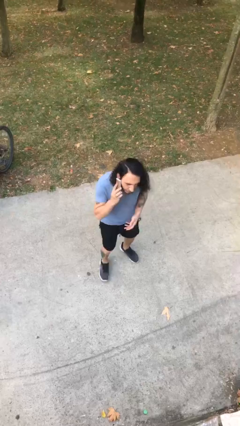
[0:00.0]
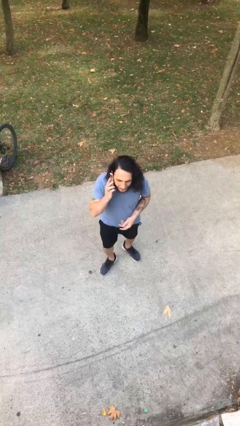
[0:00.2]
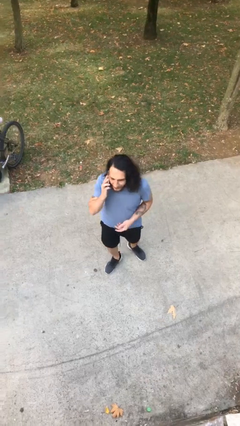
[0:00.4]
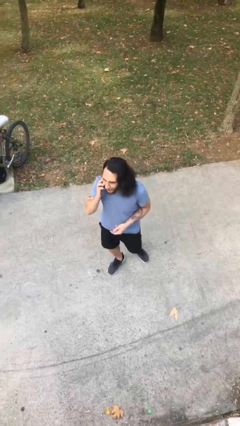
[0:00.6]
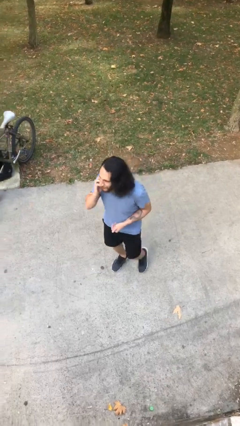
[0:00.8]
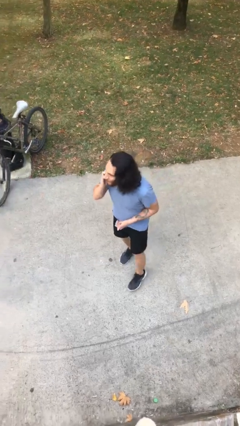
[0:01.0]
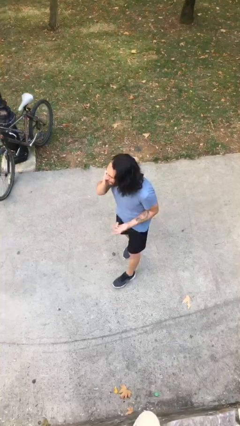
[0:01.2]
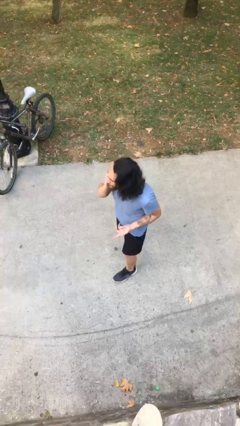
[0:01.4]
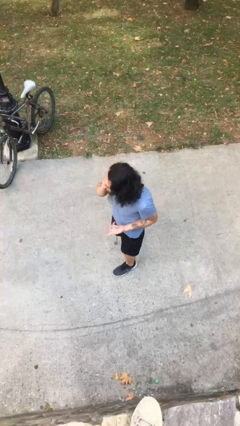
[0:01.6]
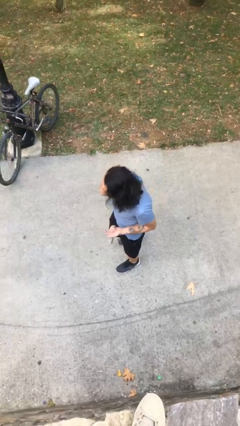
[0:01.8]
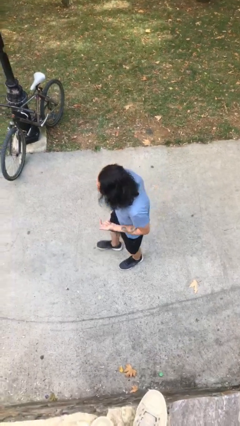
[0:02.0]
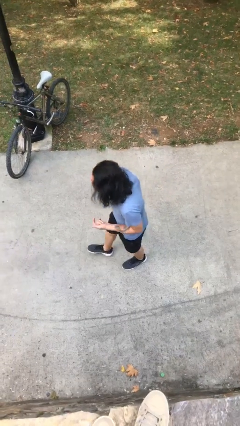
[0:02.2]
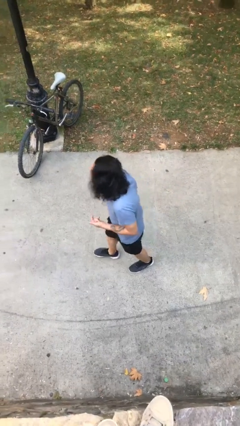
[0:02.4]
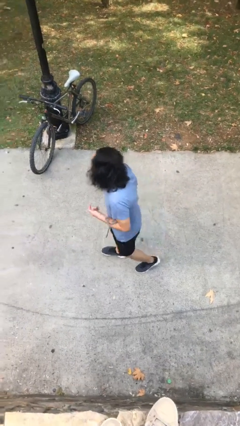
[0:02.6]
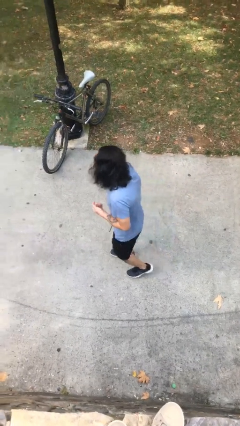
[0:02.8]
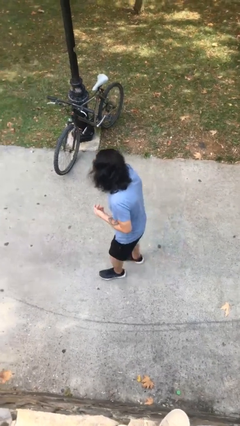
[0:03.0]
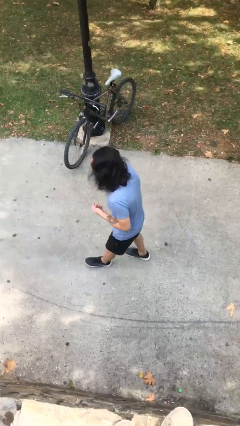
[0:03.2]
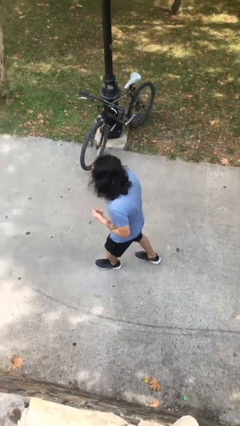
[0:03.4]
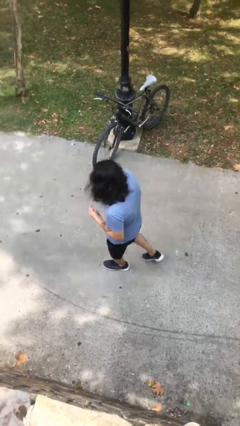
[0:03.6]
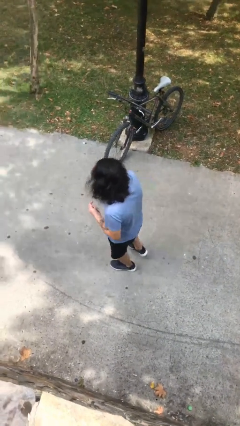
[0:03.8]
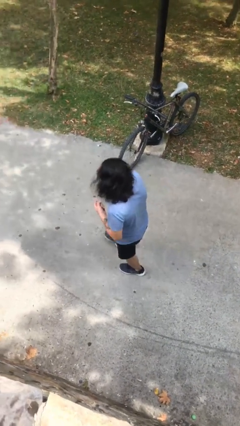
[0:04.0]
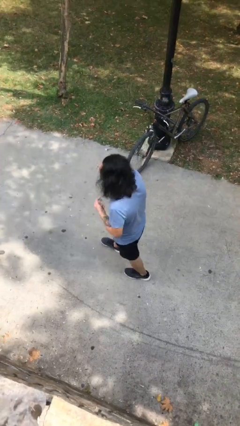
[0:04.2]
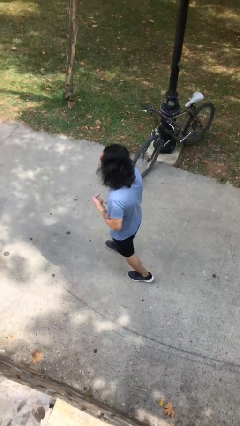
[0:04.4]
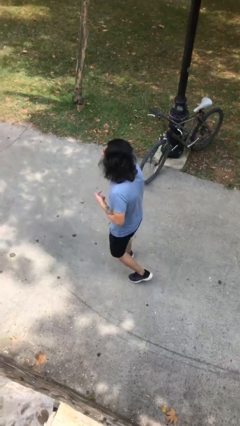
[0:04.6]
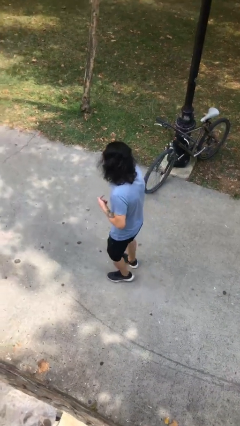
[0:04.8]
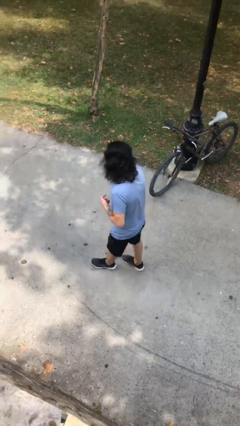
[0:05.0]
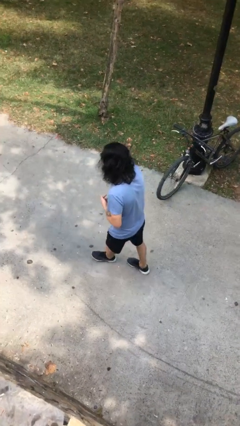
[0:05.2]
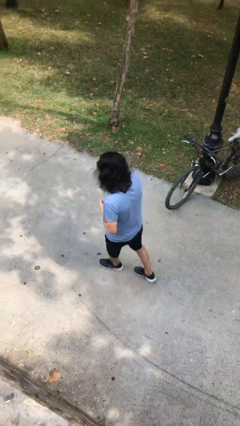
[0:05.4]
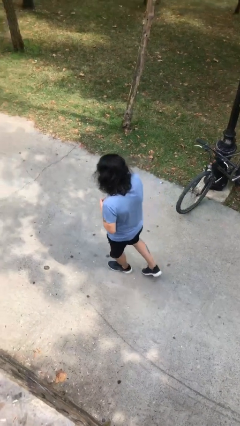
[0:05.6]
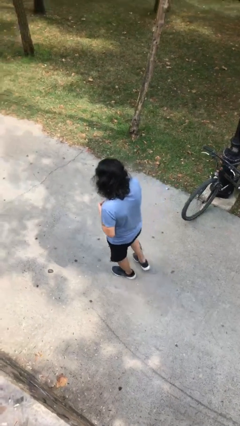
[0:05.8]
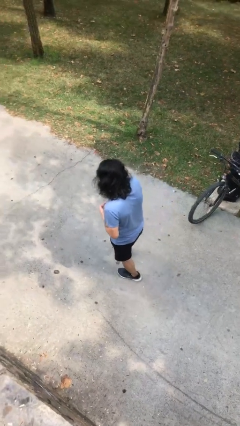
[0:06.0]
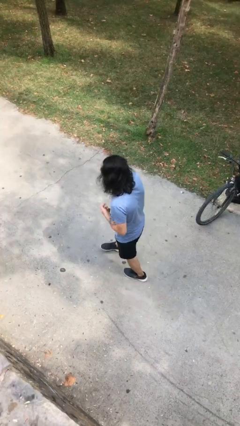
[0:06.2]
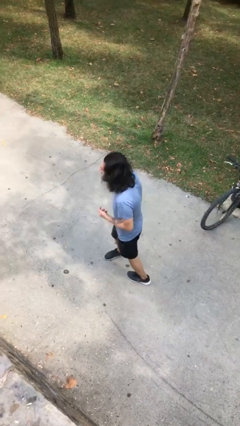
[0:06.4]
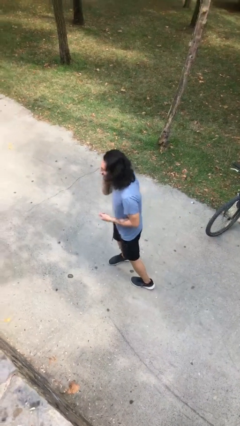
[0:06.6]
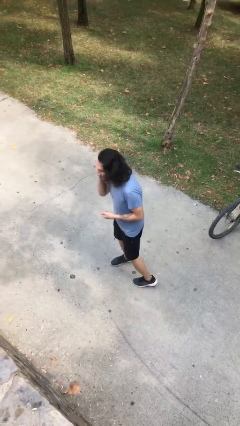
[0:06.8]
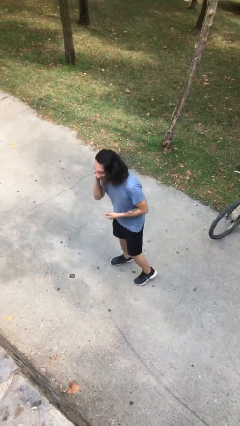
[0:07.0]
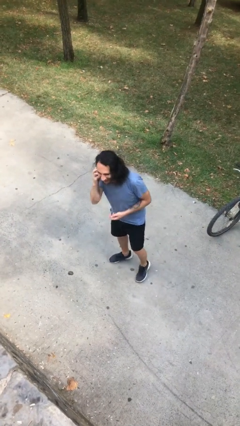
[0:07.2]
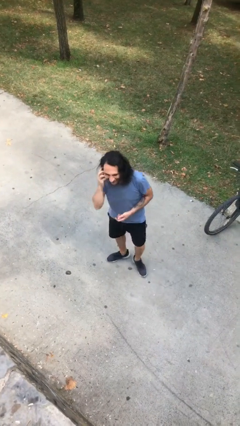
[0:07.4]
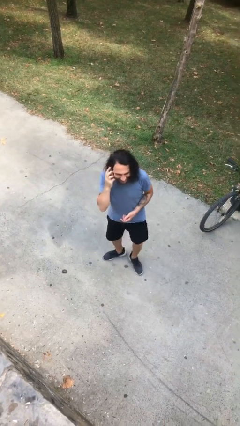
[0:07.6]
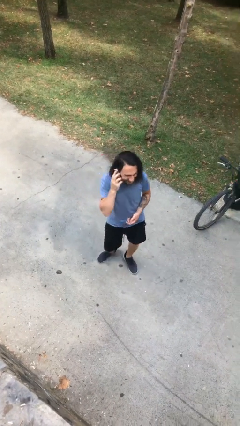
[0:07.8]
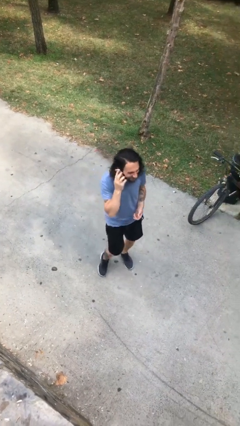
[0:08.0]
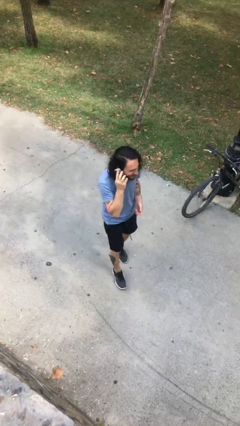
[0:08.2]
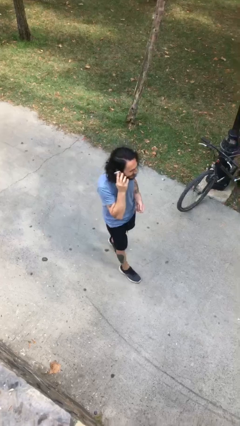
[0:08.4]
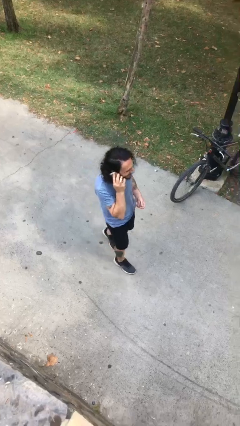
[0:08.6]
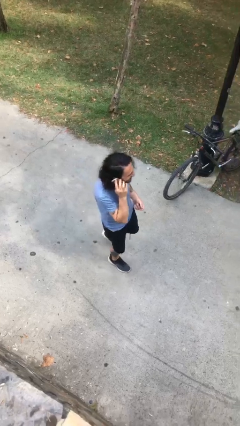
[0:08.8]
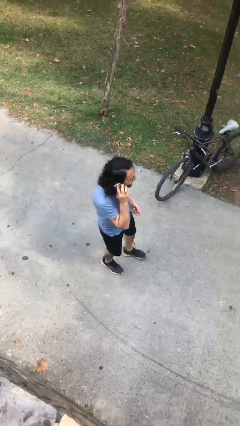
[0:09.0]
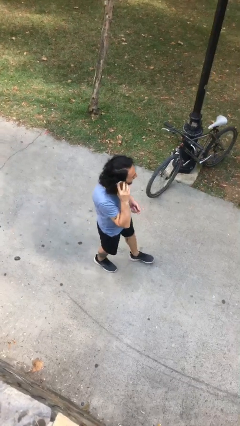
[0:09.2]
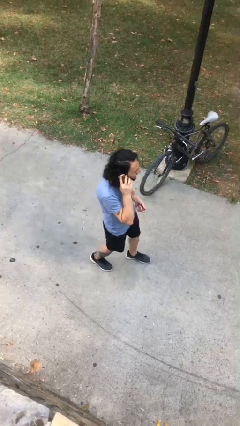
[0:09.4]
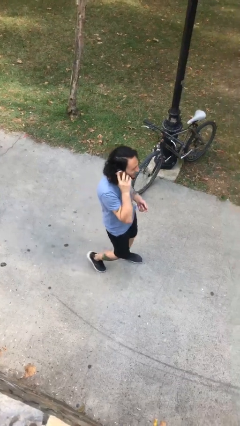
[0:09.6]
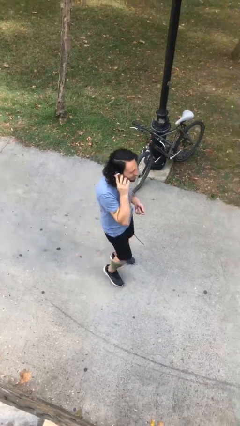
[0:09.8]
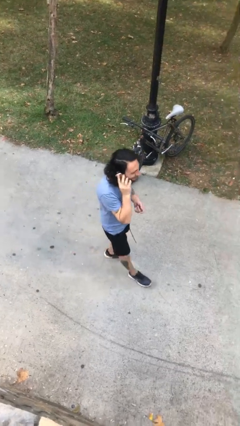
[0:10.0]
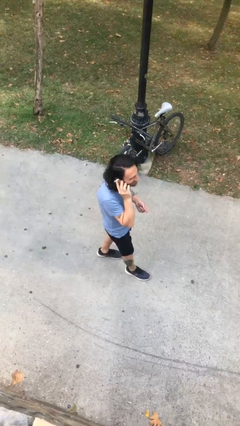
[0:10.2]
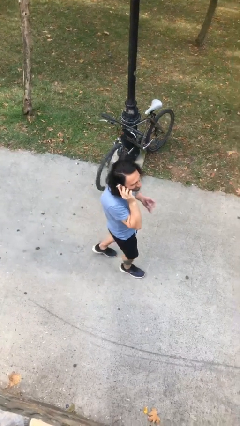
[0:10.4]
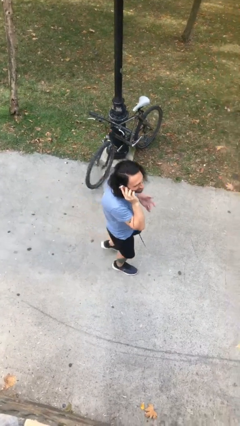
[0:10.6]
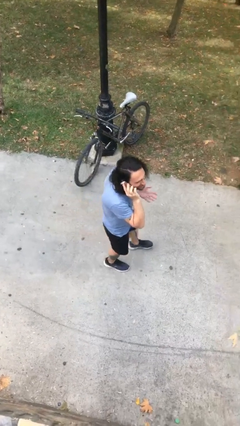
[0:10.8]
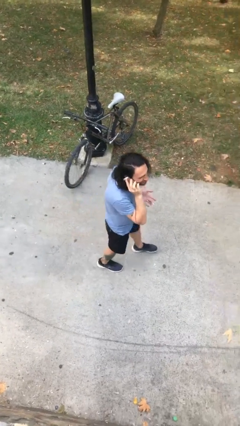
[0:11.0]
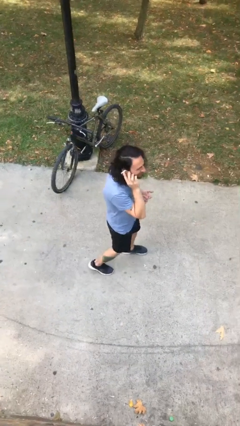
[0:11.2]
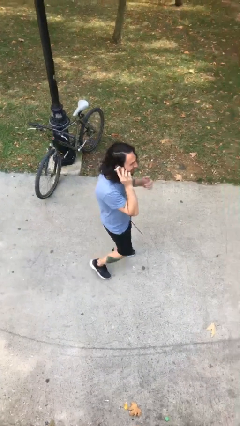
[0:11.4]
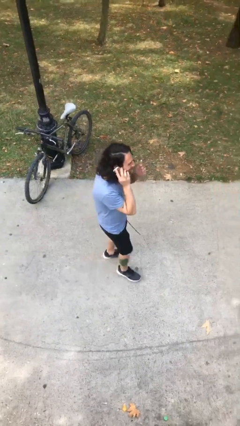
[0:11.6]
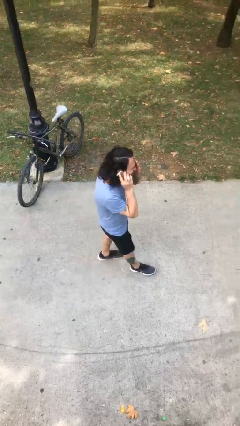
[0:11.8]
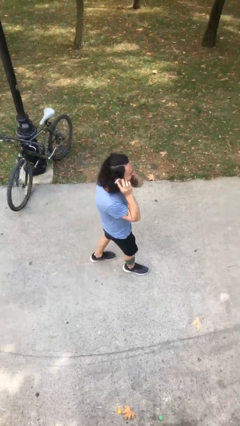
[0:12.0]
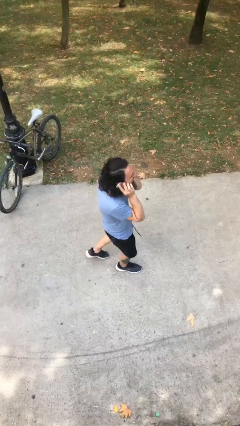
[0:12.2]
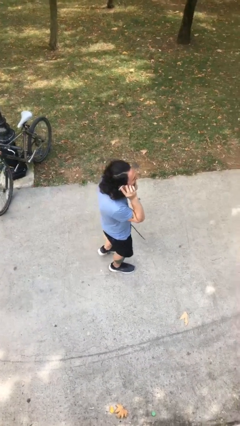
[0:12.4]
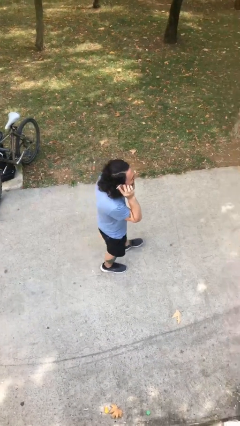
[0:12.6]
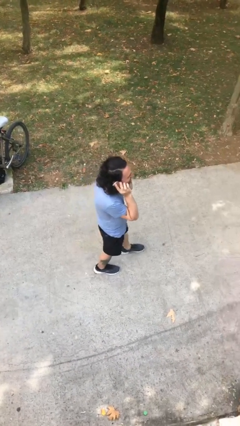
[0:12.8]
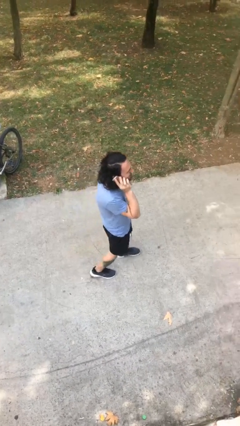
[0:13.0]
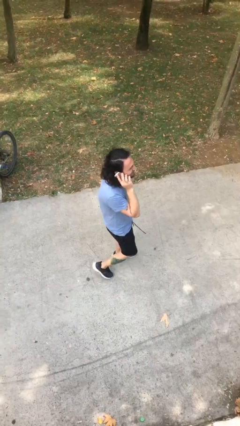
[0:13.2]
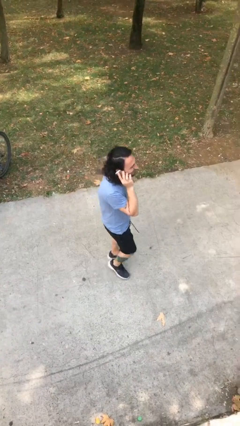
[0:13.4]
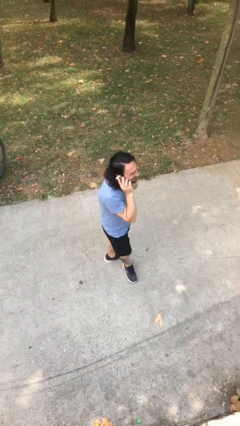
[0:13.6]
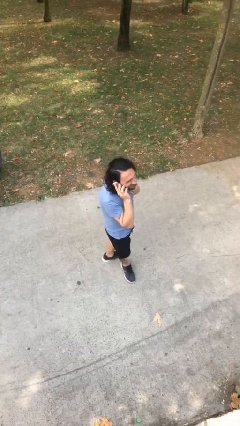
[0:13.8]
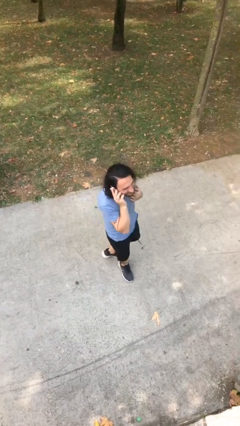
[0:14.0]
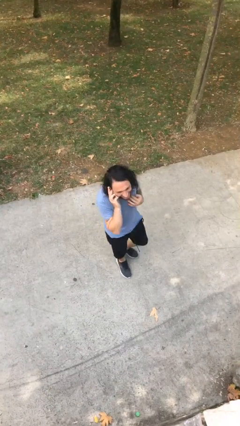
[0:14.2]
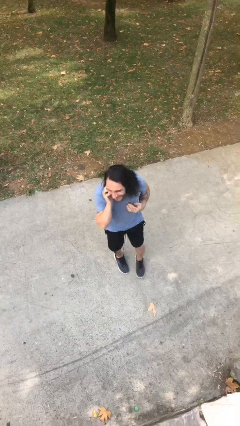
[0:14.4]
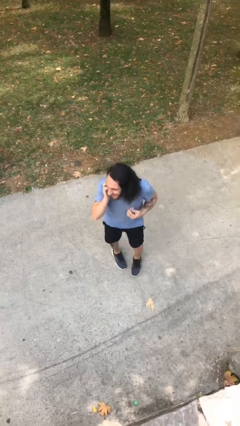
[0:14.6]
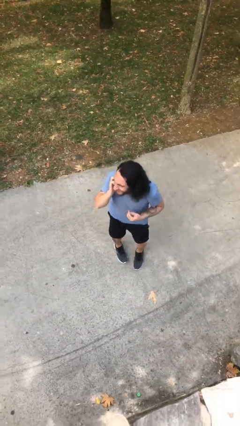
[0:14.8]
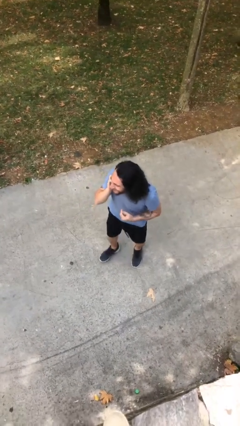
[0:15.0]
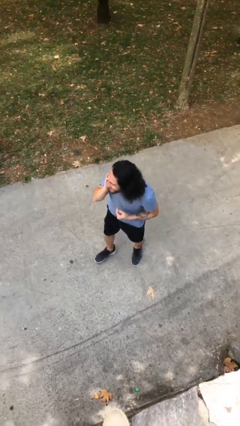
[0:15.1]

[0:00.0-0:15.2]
person talks on phone

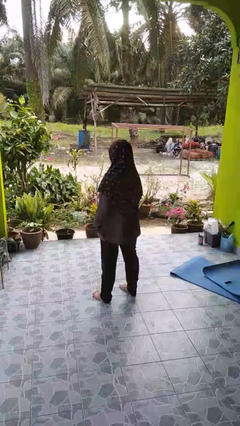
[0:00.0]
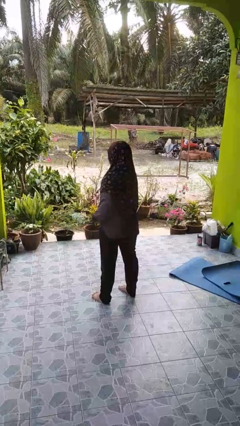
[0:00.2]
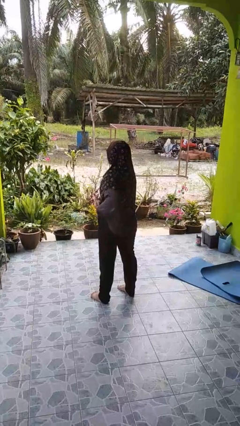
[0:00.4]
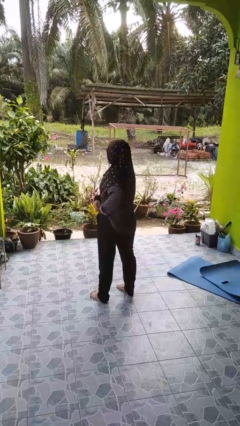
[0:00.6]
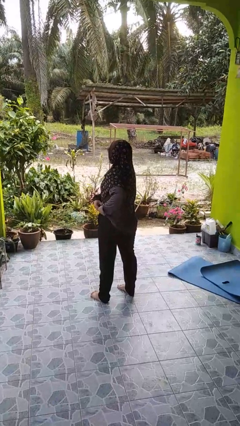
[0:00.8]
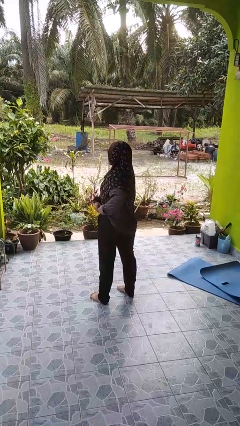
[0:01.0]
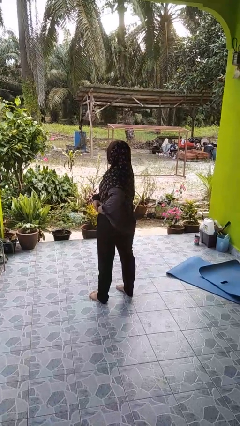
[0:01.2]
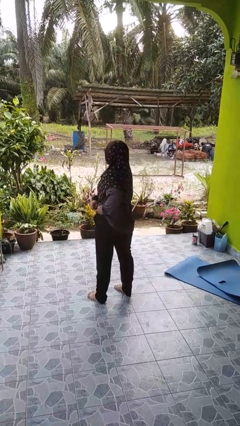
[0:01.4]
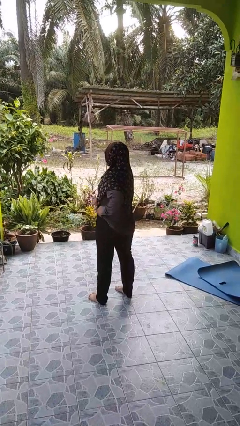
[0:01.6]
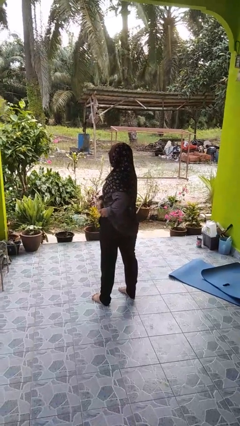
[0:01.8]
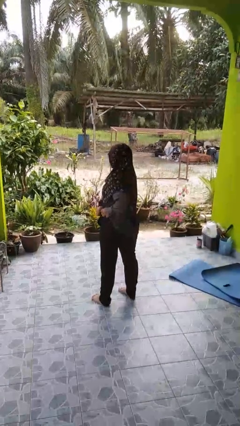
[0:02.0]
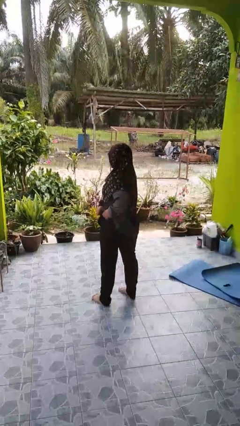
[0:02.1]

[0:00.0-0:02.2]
person tucks in shirt

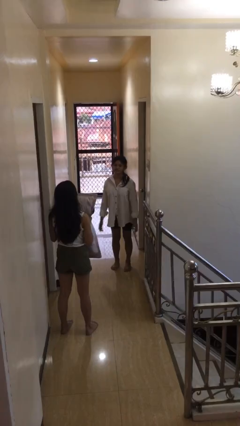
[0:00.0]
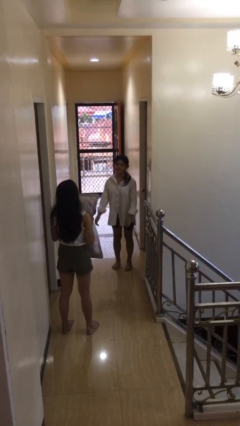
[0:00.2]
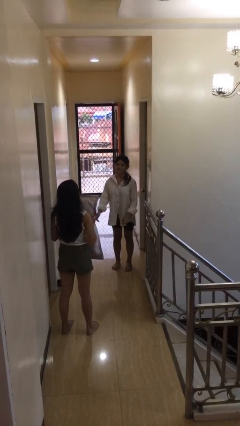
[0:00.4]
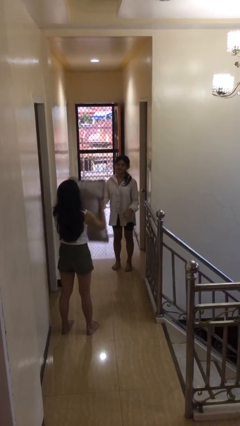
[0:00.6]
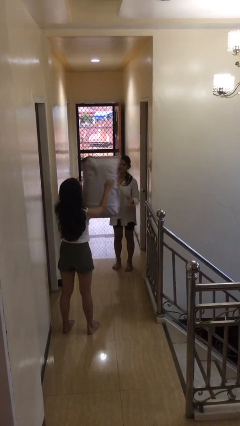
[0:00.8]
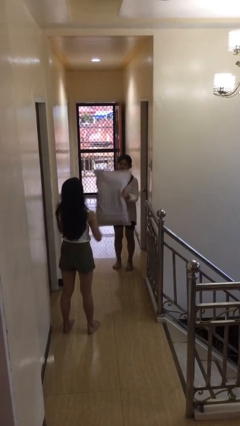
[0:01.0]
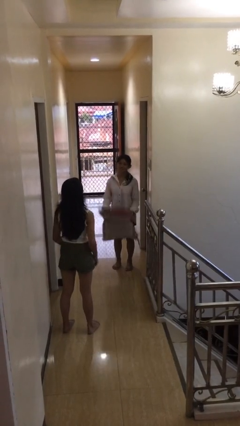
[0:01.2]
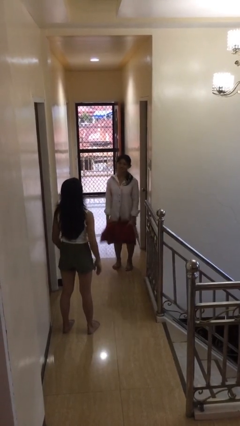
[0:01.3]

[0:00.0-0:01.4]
person catches object from person
